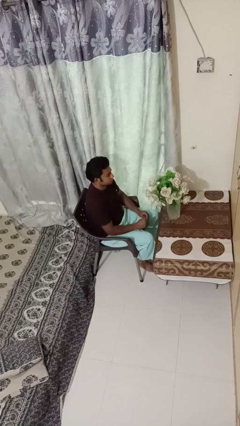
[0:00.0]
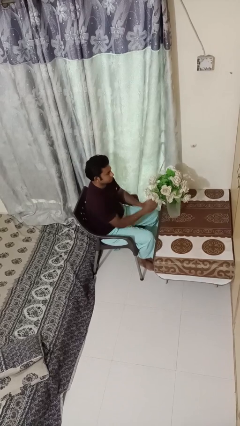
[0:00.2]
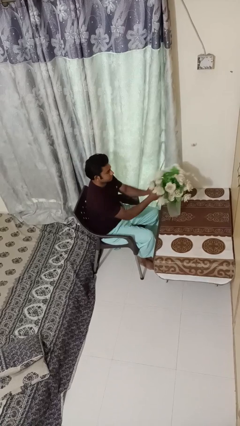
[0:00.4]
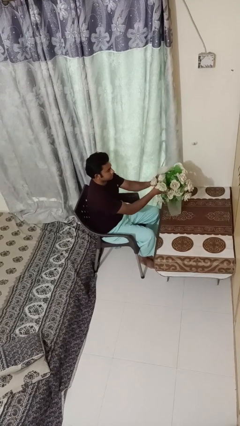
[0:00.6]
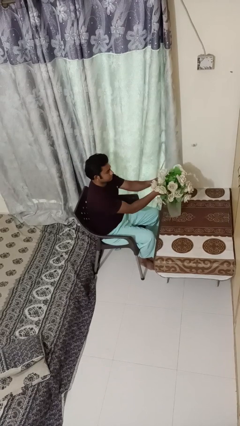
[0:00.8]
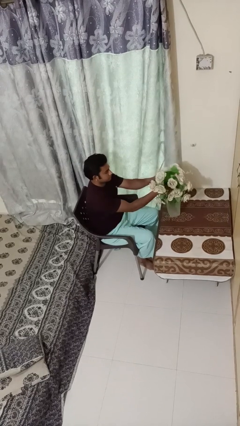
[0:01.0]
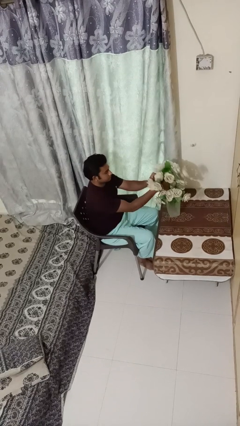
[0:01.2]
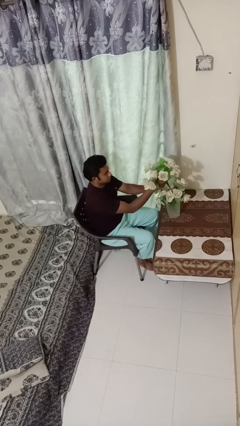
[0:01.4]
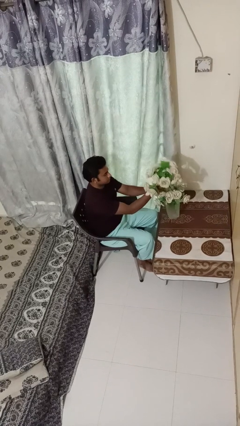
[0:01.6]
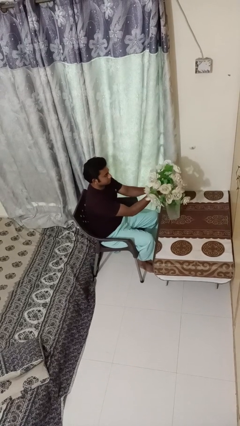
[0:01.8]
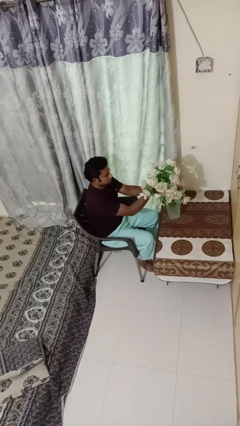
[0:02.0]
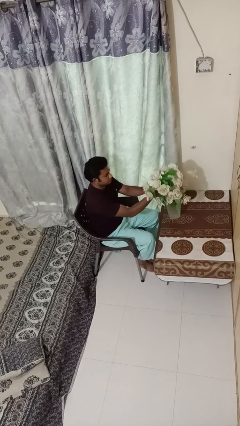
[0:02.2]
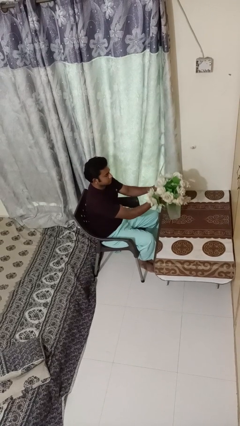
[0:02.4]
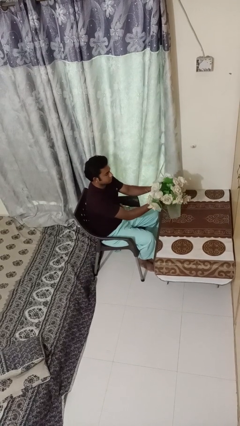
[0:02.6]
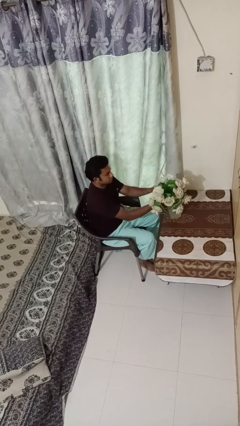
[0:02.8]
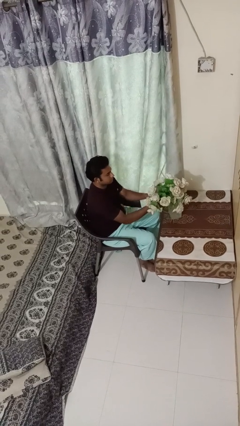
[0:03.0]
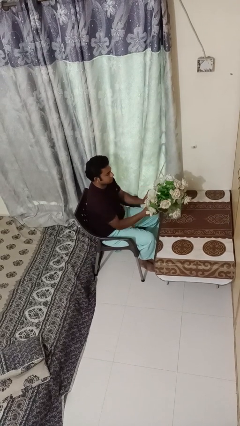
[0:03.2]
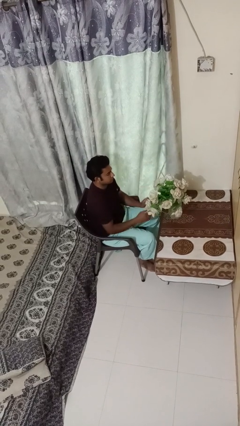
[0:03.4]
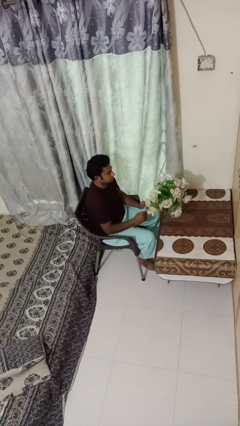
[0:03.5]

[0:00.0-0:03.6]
person arranges flowers in vase

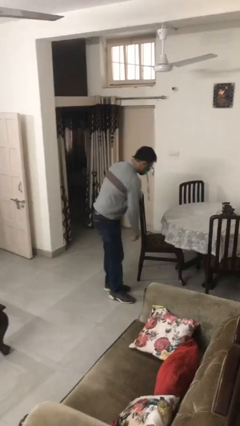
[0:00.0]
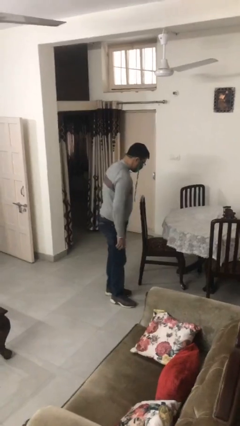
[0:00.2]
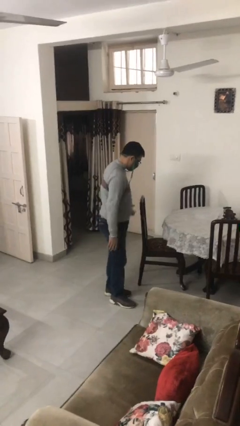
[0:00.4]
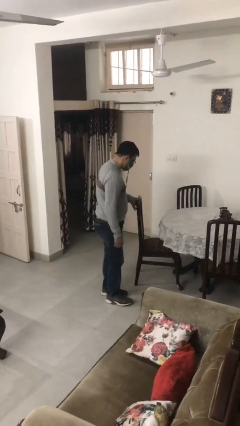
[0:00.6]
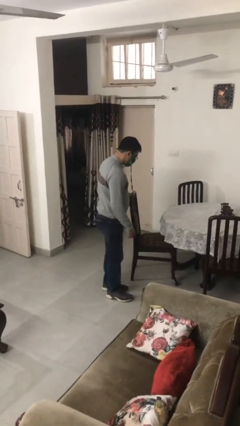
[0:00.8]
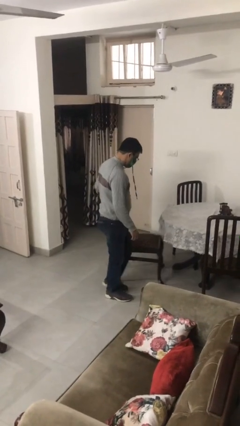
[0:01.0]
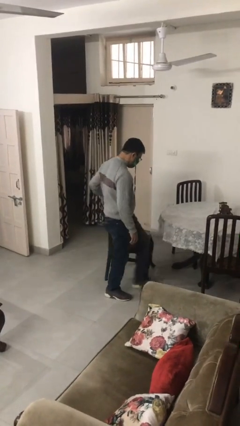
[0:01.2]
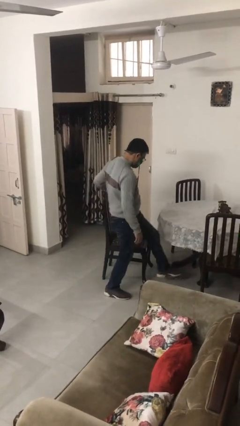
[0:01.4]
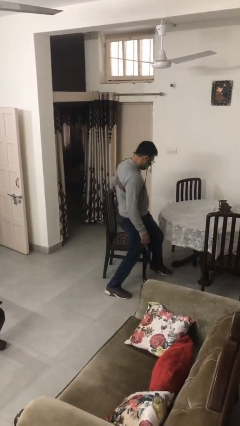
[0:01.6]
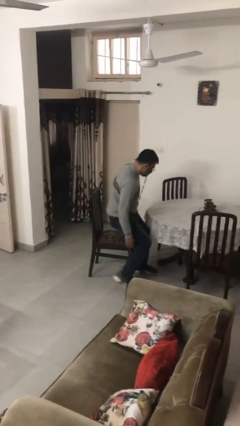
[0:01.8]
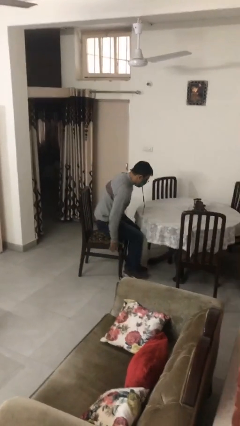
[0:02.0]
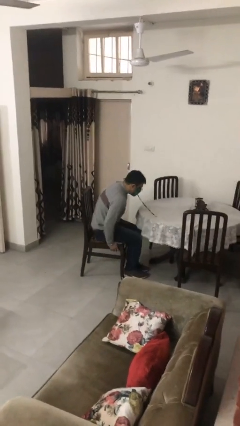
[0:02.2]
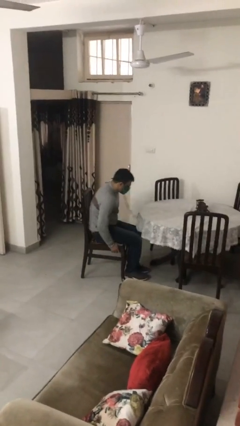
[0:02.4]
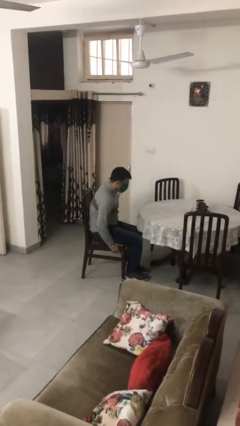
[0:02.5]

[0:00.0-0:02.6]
person sits down

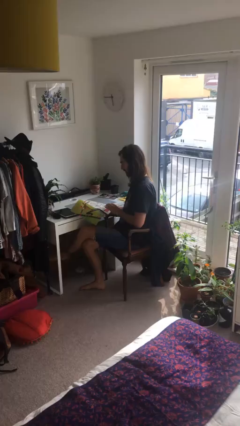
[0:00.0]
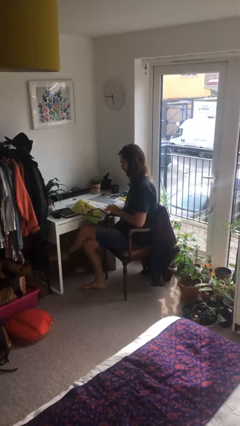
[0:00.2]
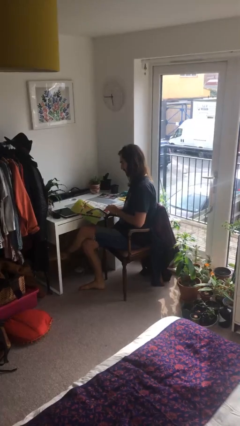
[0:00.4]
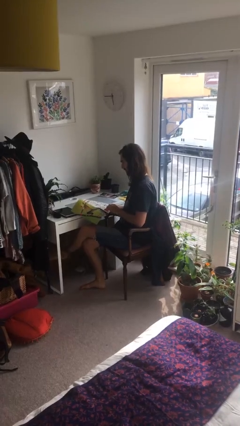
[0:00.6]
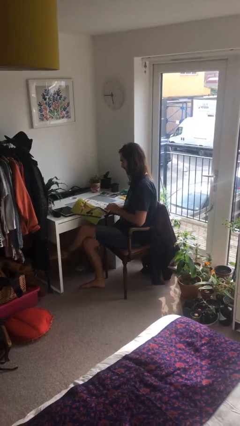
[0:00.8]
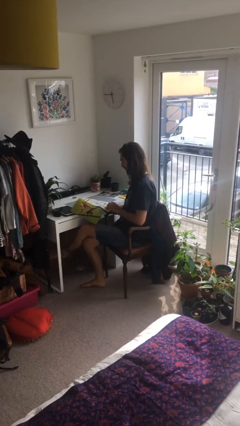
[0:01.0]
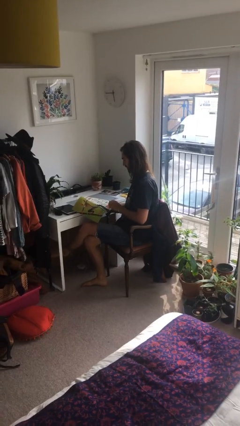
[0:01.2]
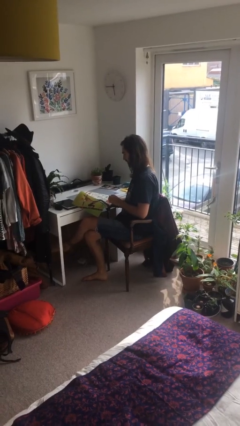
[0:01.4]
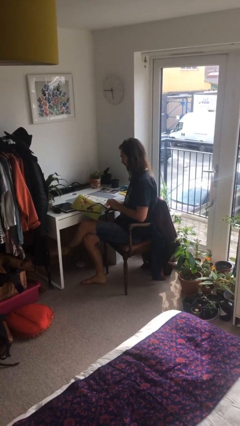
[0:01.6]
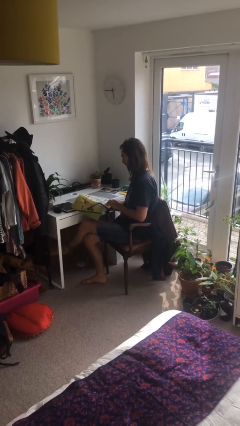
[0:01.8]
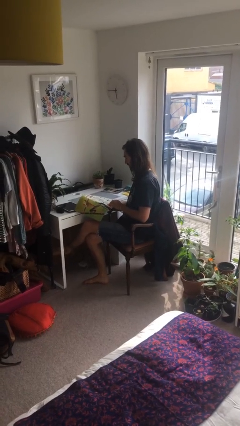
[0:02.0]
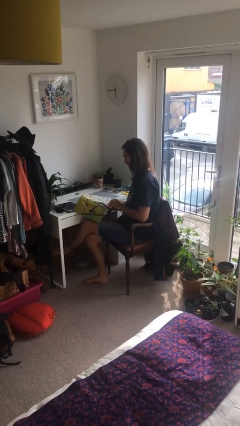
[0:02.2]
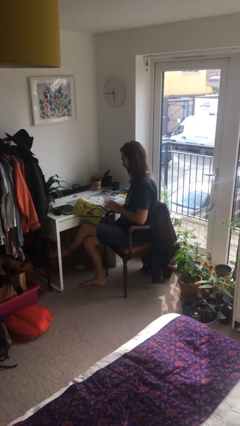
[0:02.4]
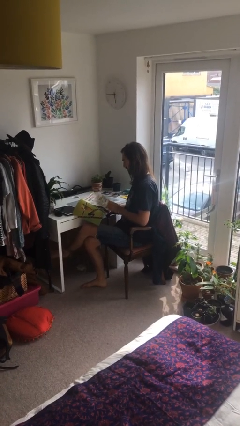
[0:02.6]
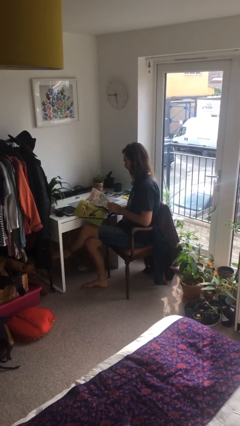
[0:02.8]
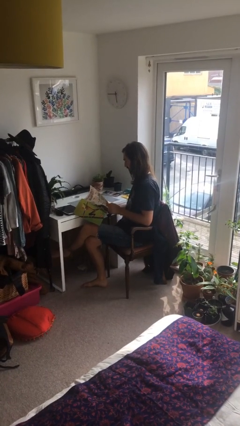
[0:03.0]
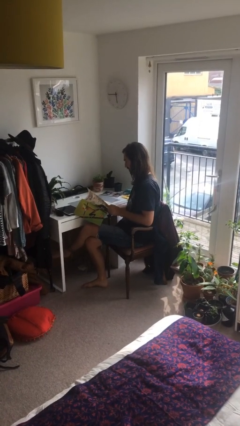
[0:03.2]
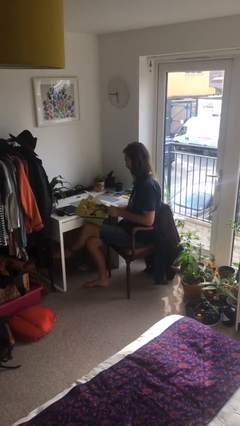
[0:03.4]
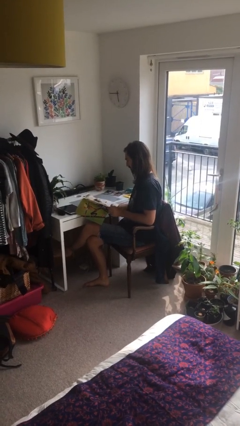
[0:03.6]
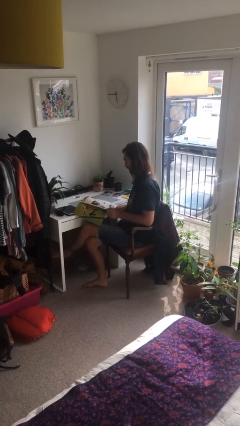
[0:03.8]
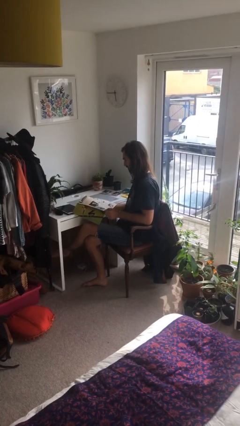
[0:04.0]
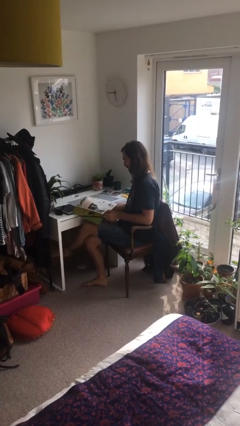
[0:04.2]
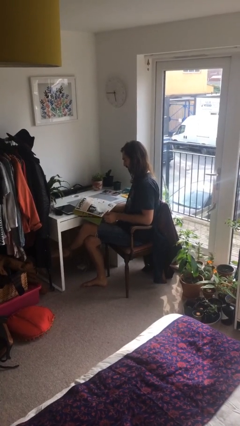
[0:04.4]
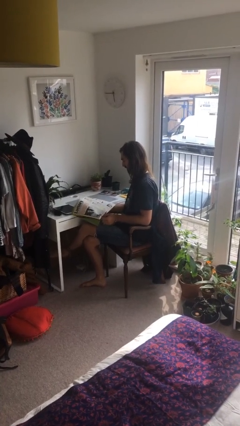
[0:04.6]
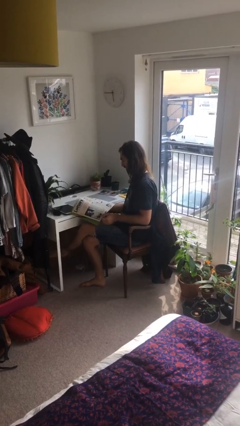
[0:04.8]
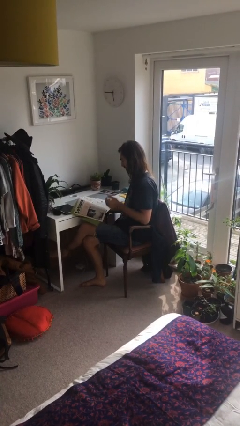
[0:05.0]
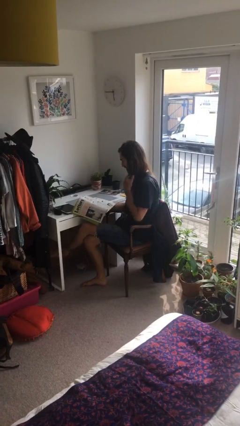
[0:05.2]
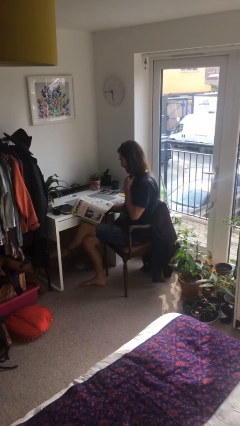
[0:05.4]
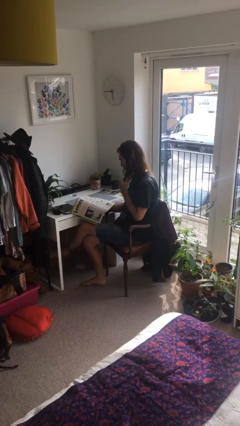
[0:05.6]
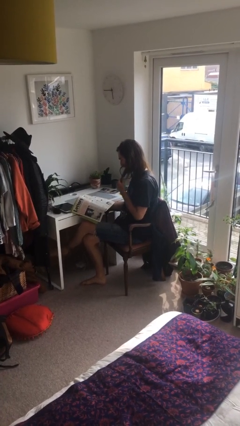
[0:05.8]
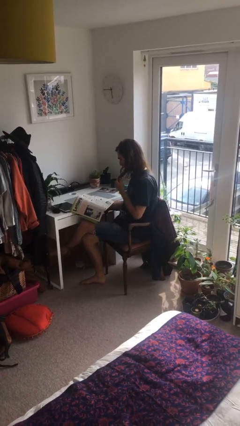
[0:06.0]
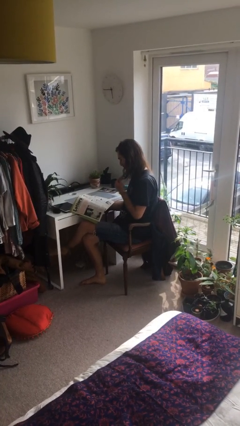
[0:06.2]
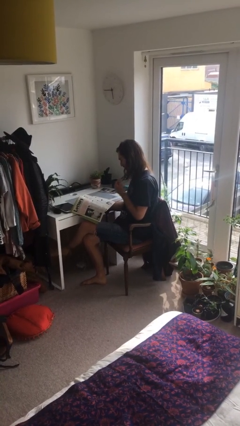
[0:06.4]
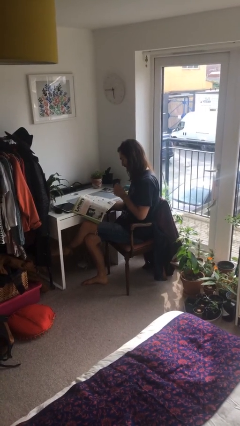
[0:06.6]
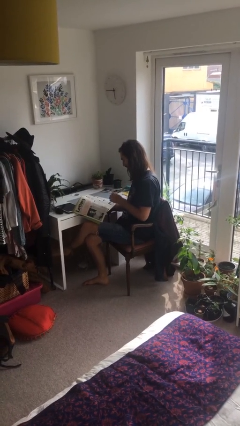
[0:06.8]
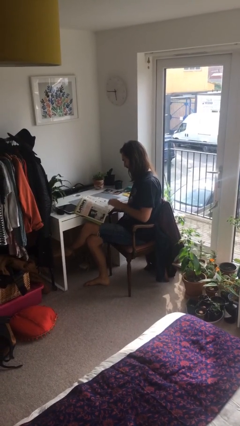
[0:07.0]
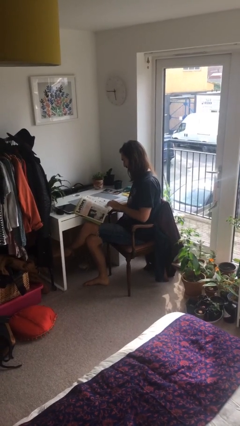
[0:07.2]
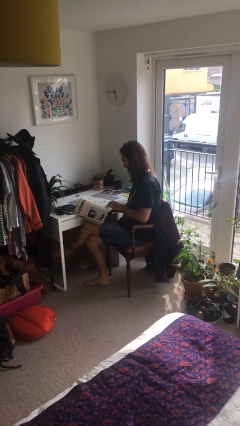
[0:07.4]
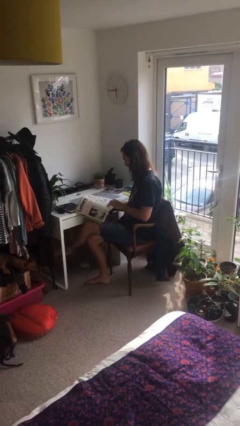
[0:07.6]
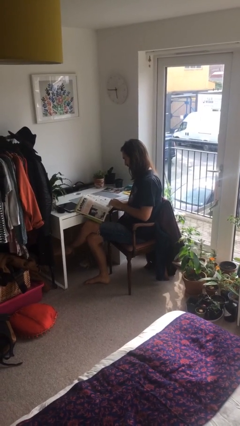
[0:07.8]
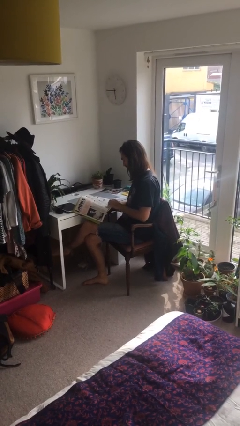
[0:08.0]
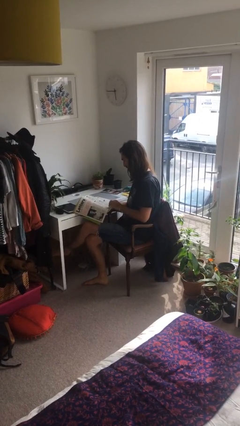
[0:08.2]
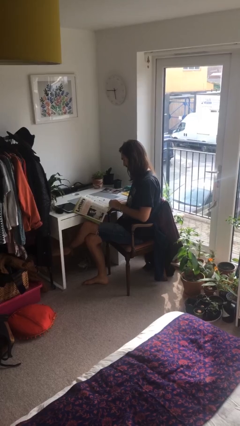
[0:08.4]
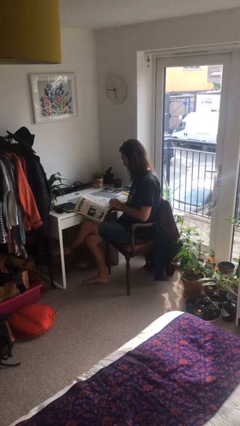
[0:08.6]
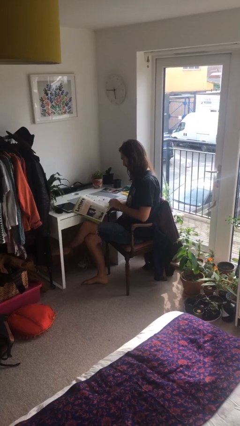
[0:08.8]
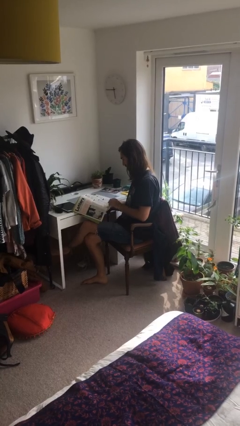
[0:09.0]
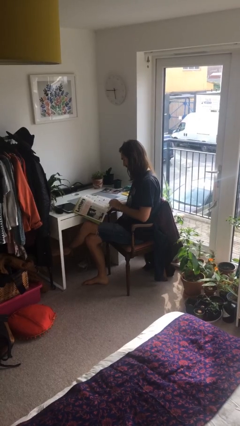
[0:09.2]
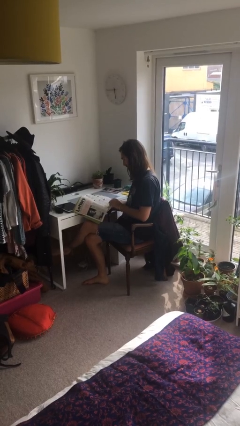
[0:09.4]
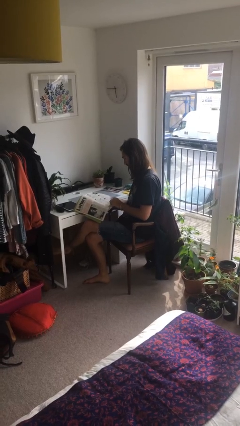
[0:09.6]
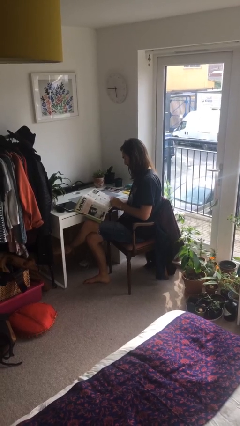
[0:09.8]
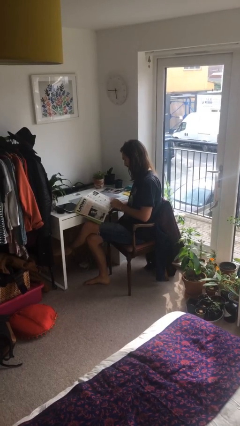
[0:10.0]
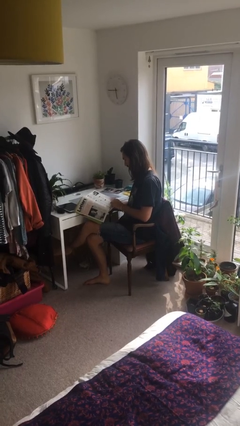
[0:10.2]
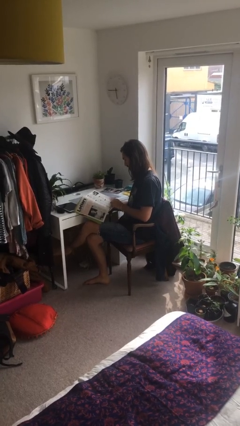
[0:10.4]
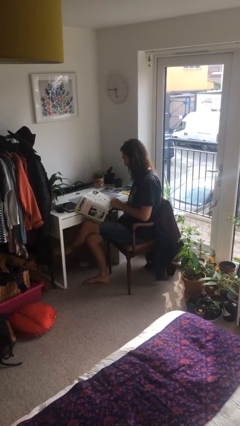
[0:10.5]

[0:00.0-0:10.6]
person reads document

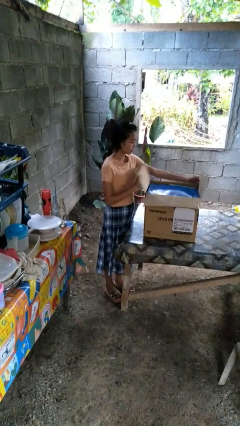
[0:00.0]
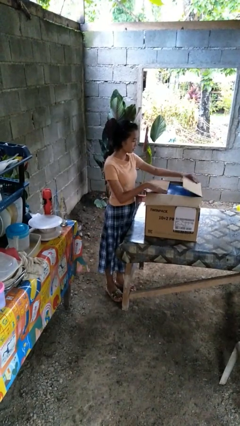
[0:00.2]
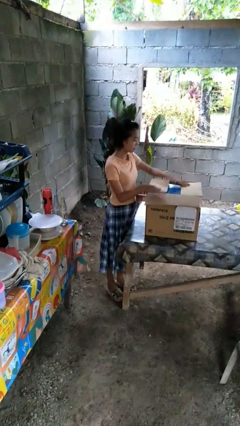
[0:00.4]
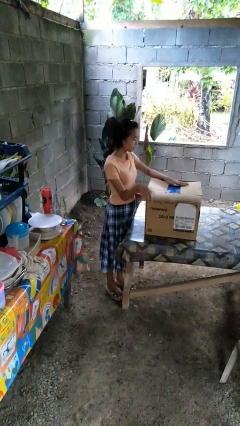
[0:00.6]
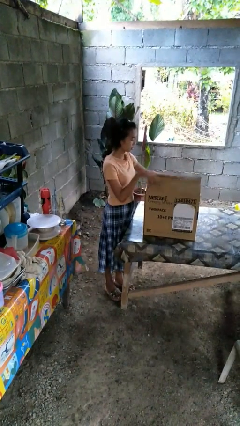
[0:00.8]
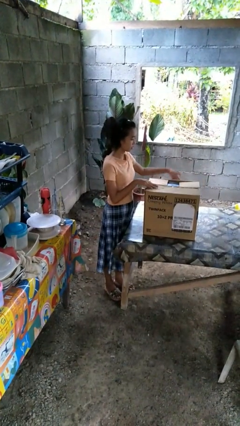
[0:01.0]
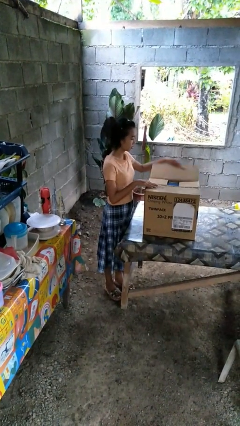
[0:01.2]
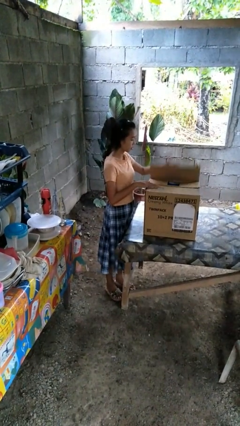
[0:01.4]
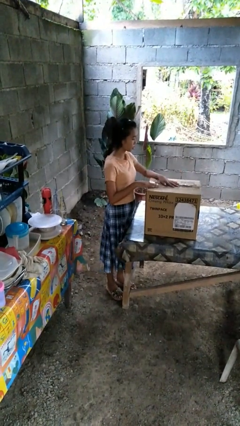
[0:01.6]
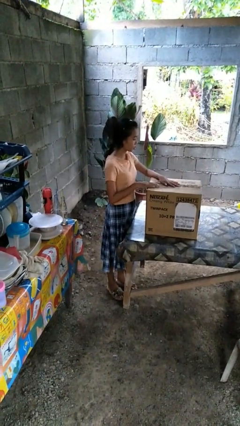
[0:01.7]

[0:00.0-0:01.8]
person closes box
